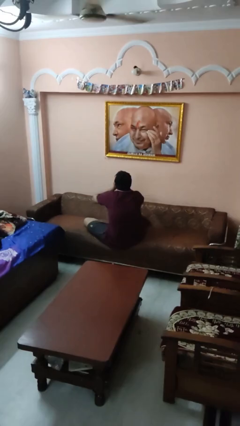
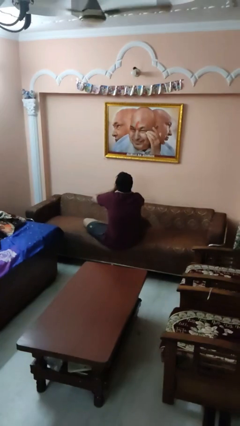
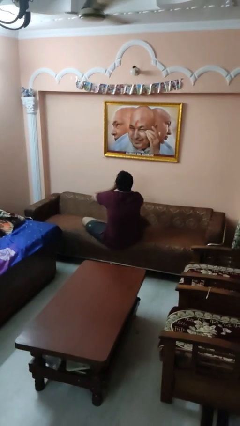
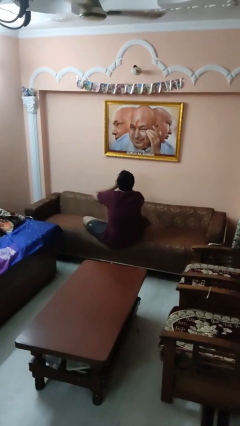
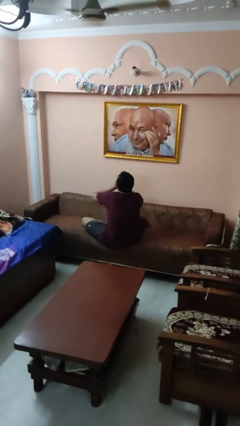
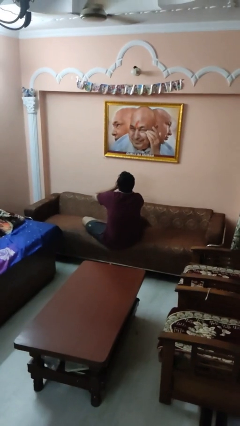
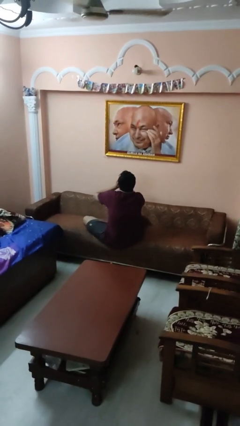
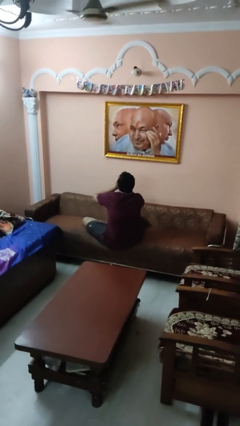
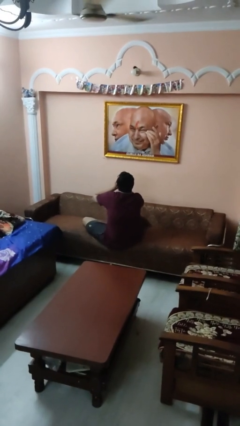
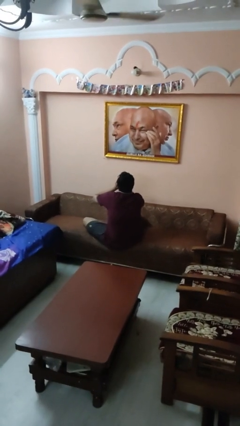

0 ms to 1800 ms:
person covers face with hands

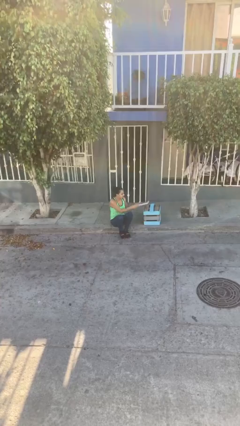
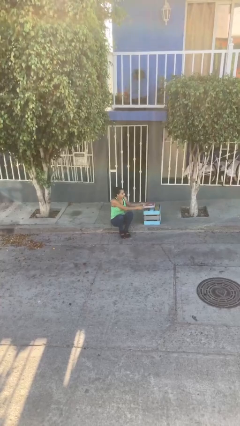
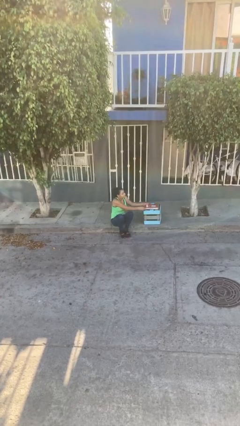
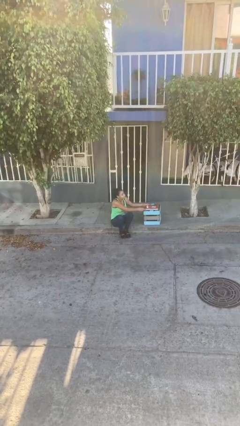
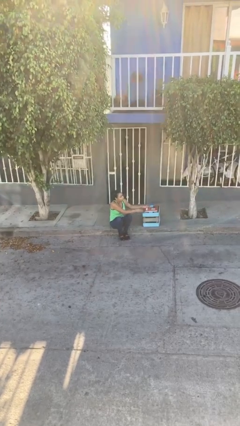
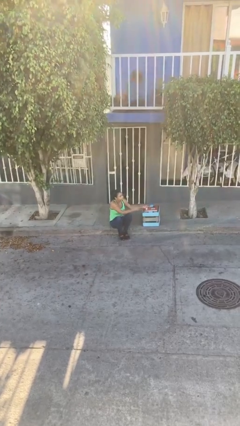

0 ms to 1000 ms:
person puts down object on table

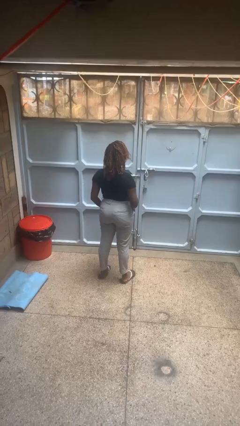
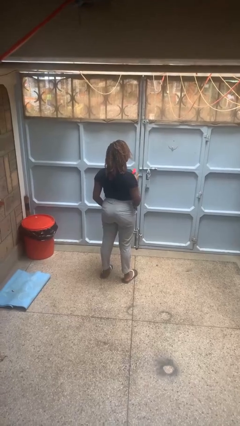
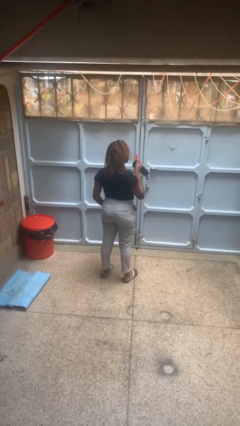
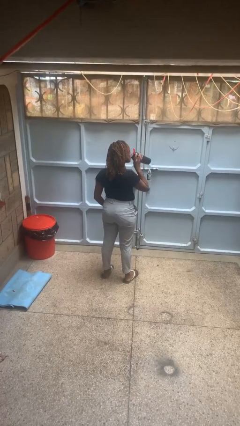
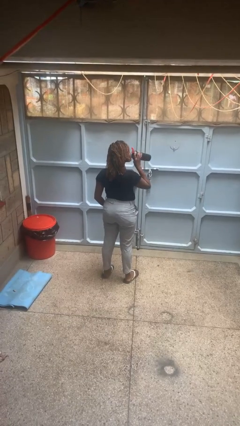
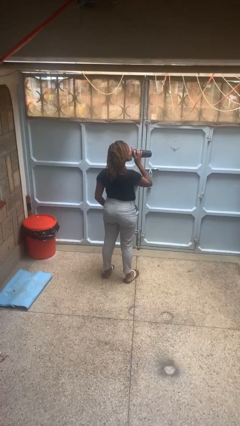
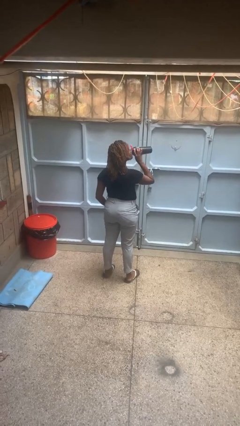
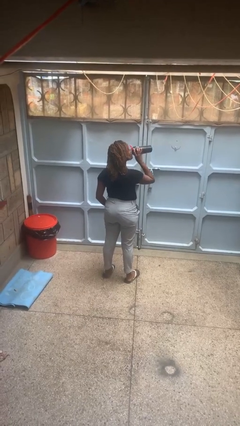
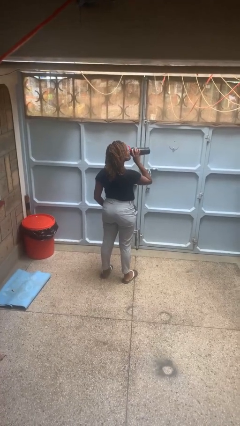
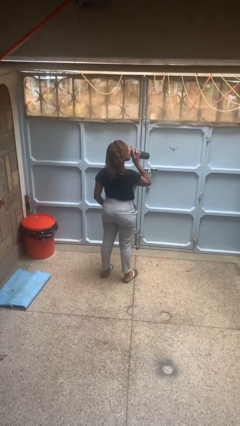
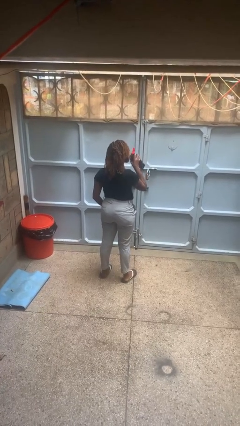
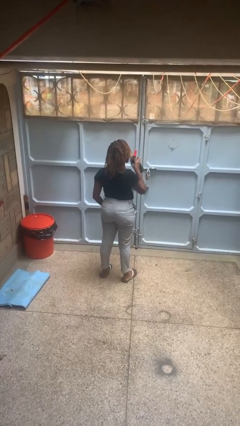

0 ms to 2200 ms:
person drinks from bottle

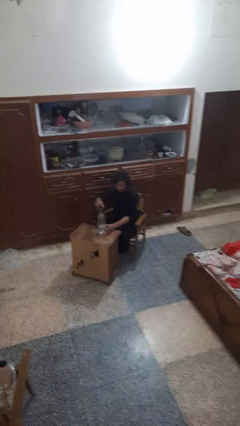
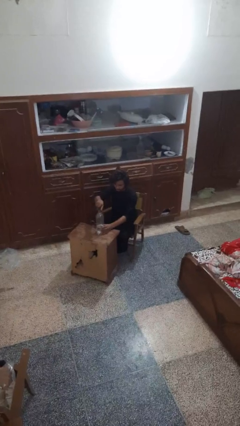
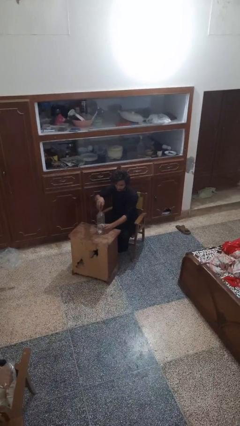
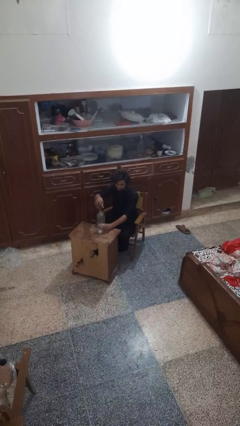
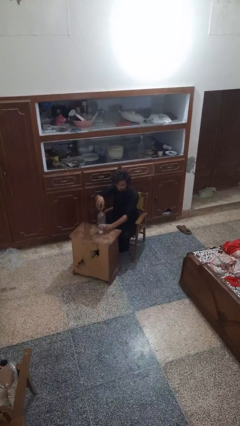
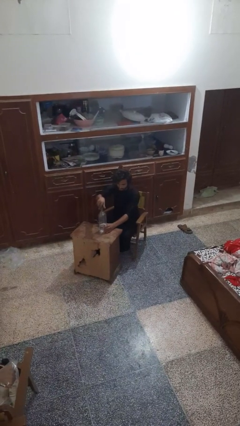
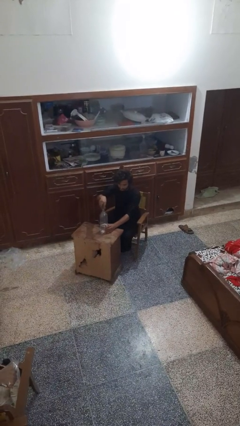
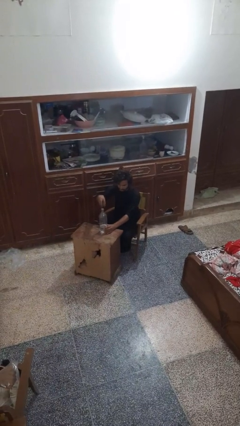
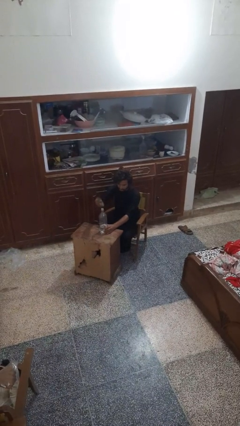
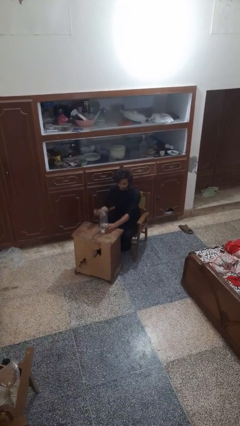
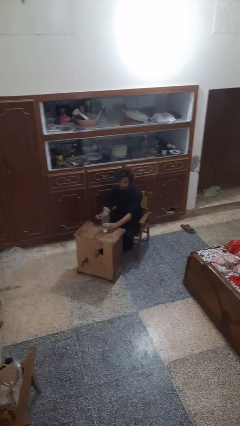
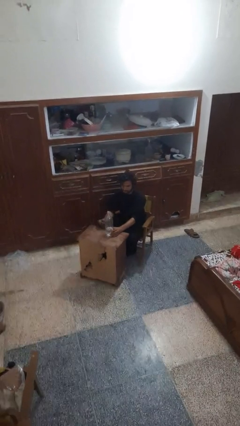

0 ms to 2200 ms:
person unscrews lid from bottle

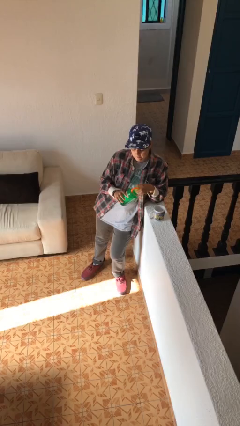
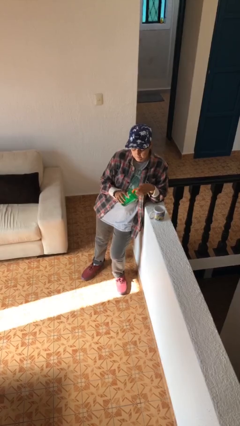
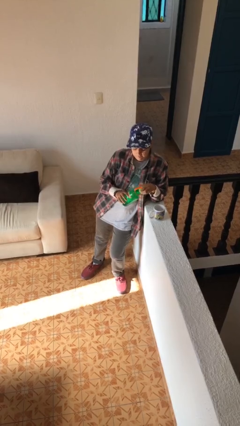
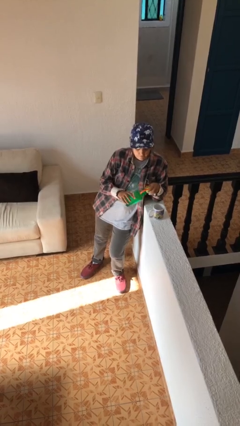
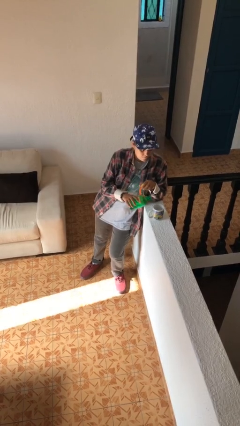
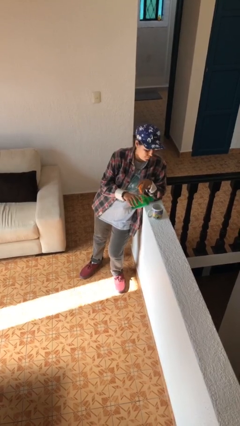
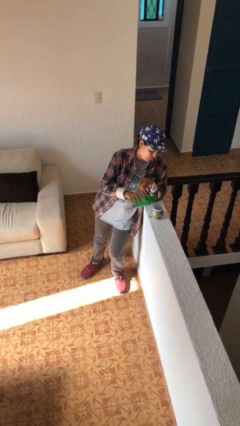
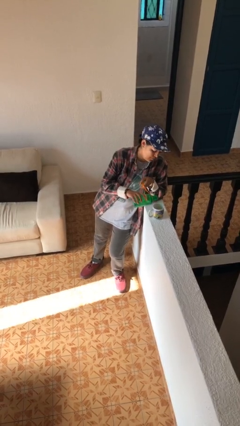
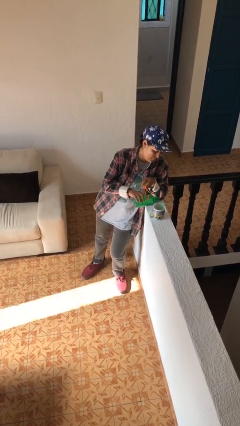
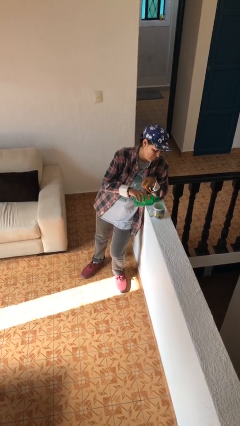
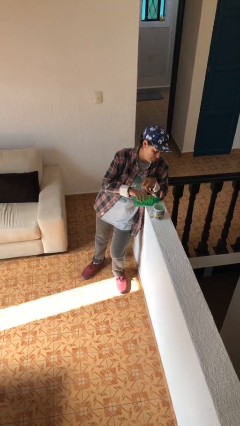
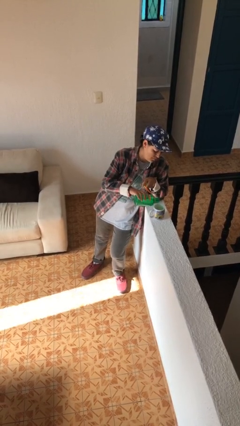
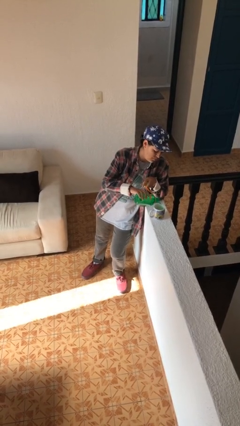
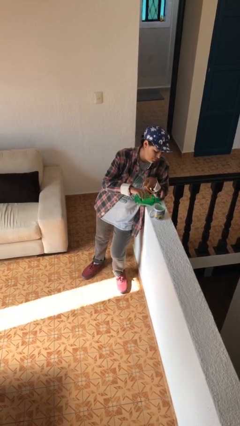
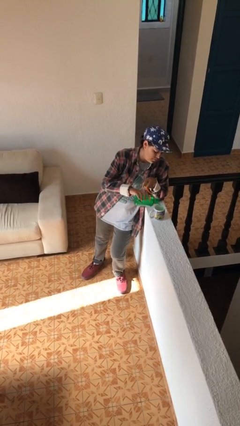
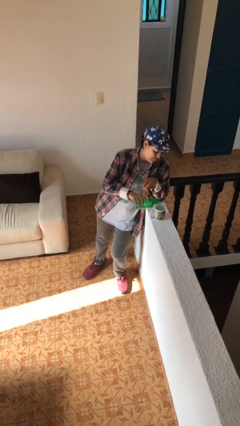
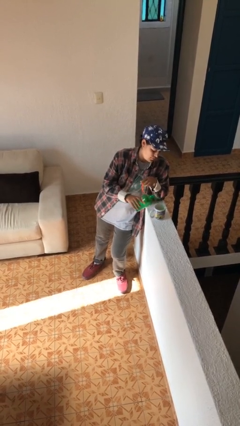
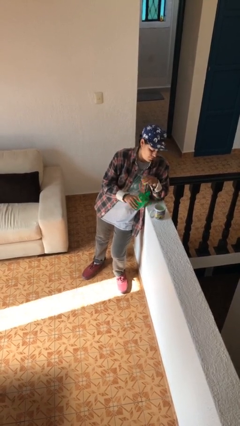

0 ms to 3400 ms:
person pours liquid into cup

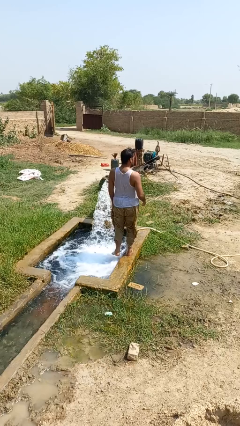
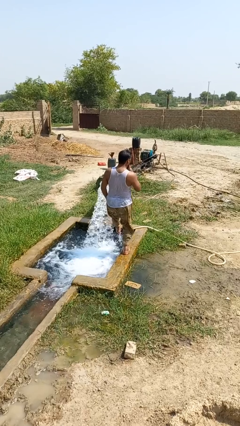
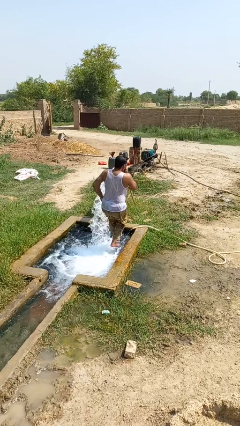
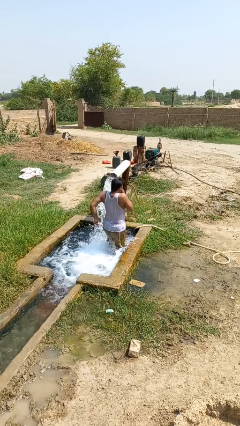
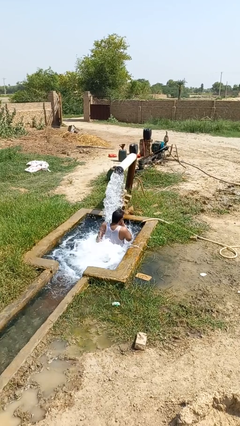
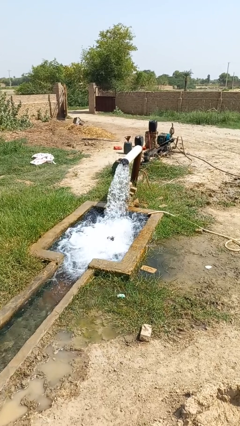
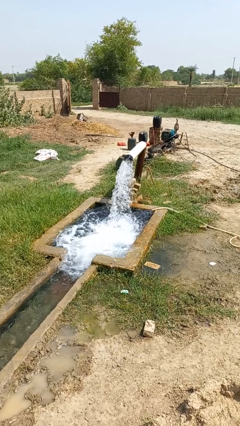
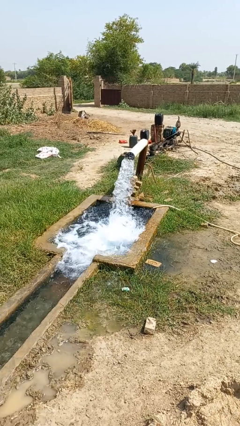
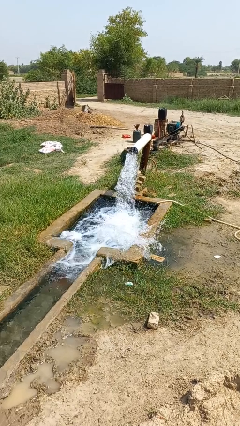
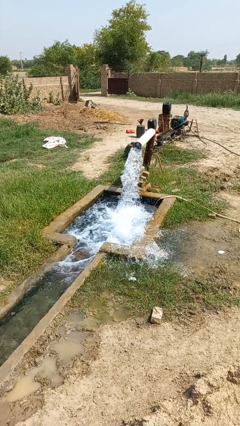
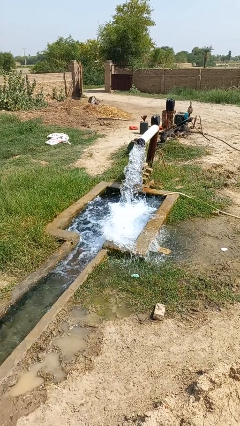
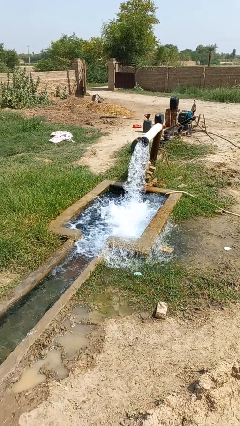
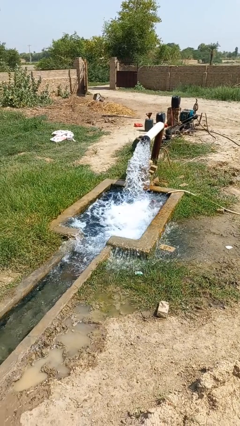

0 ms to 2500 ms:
person falls into pool

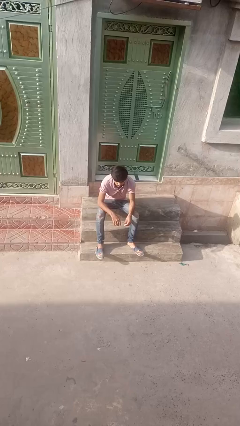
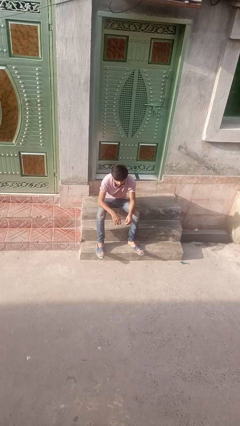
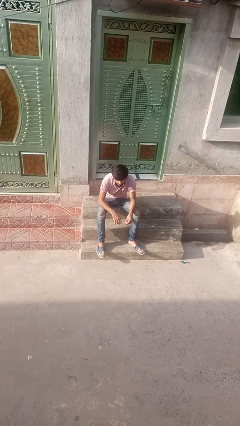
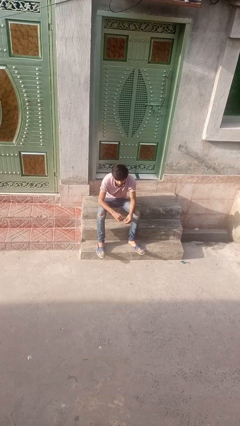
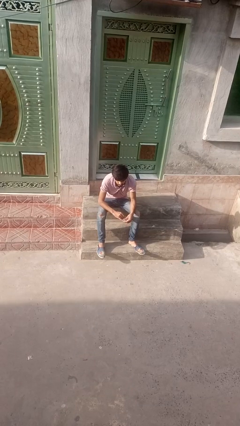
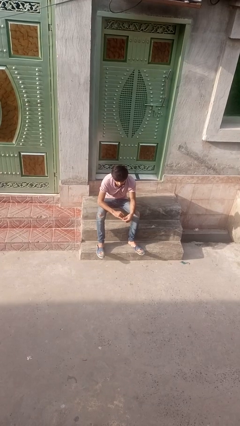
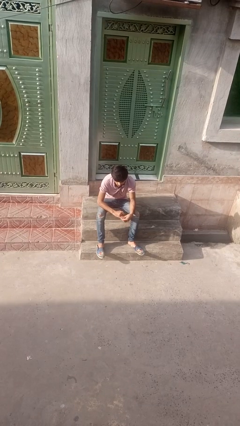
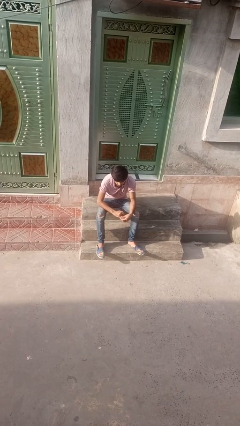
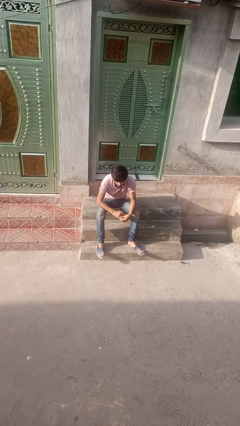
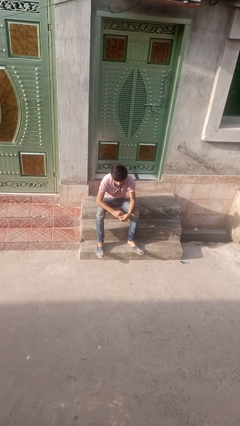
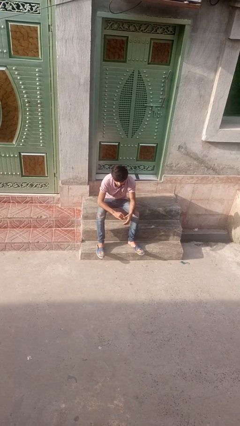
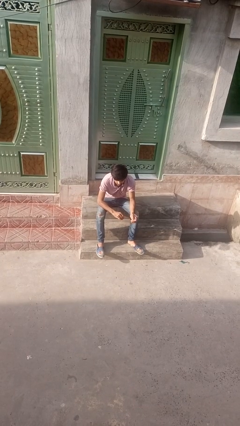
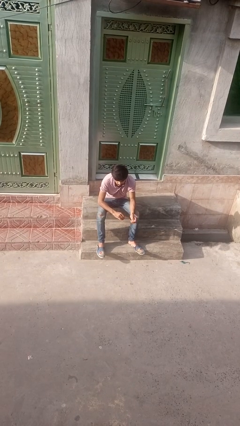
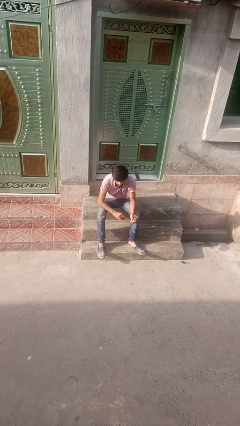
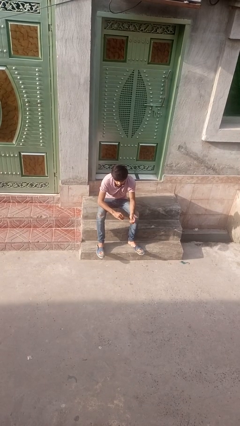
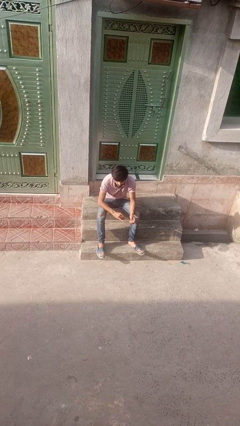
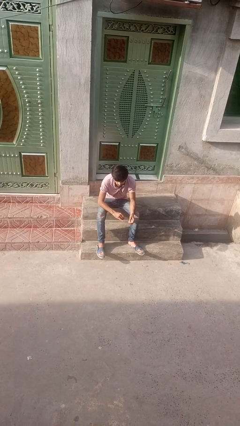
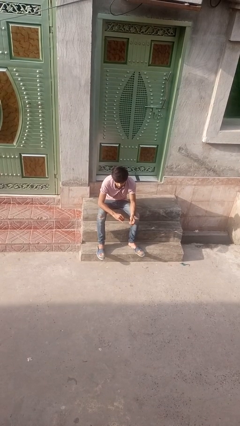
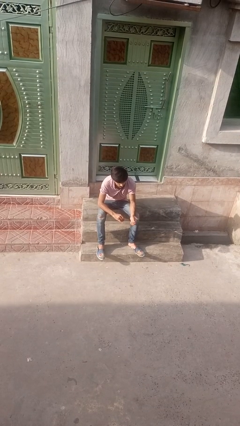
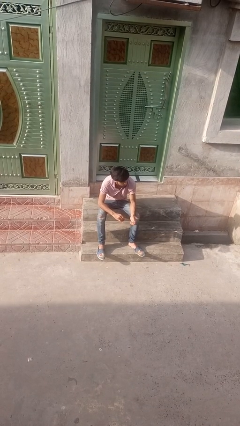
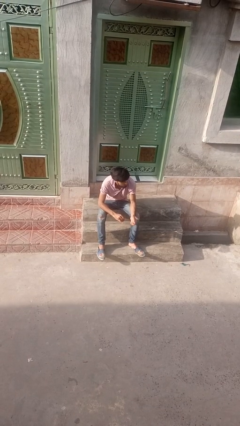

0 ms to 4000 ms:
person puts on ring
